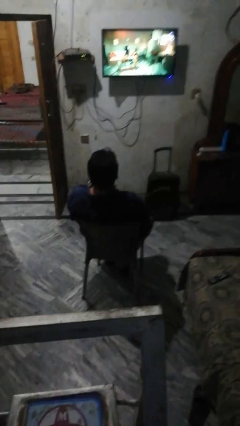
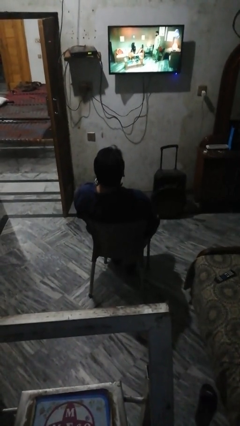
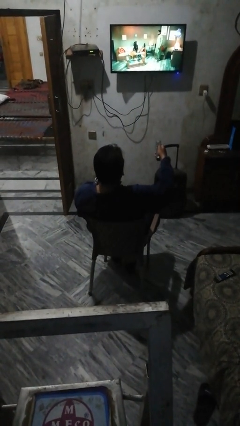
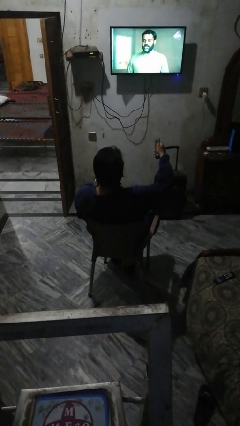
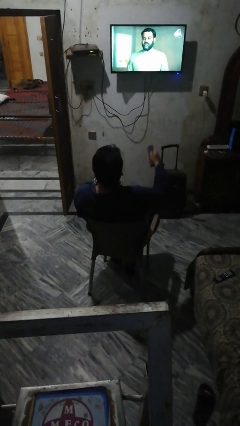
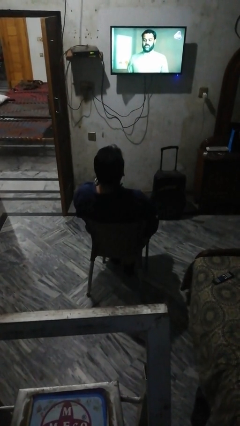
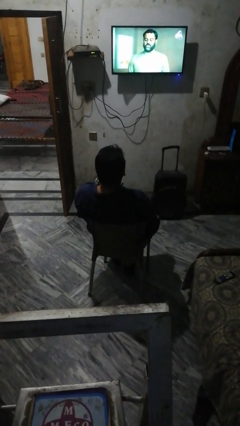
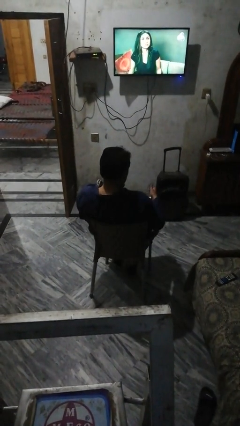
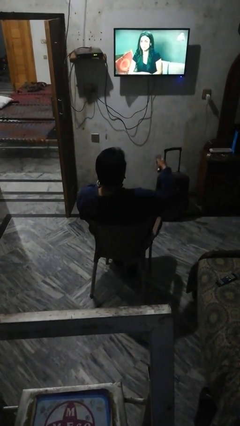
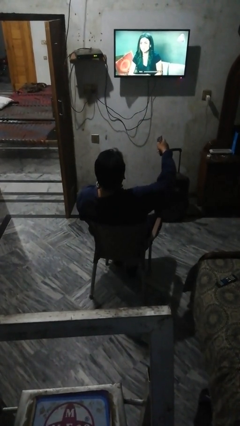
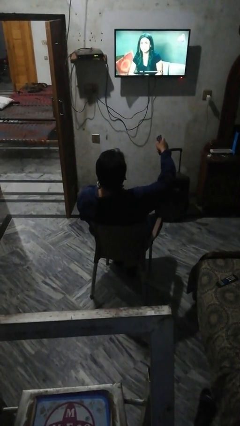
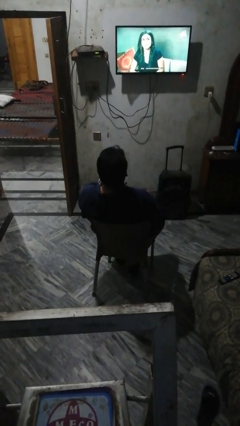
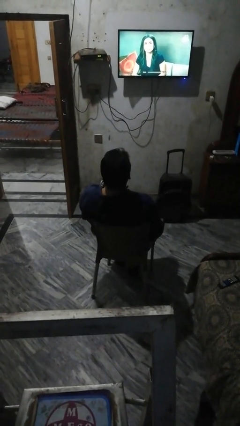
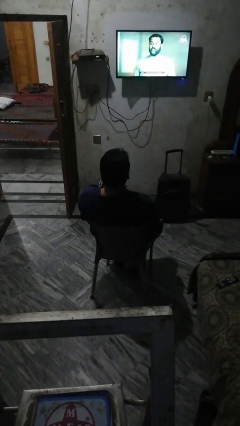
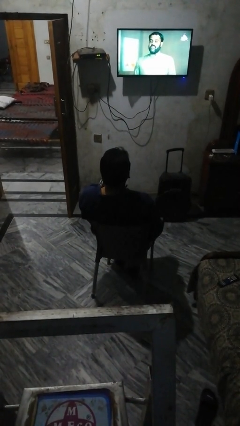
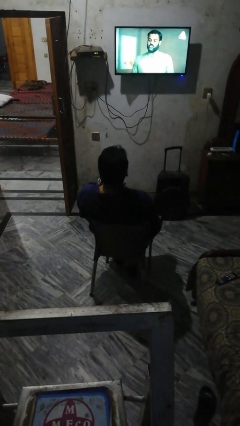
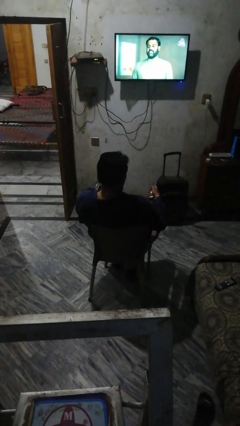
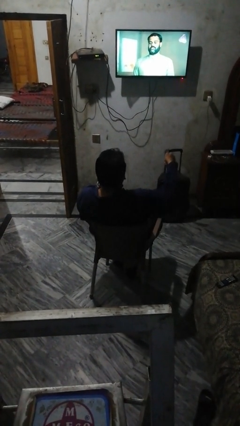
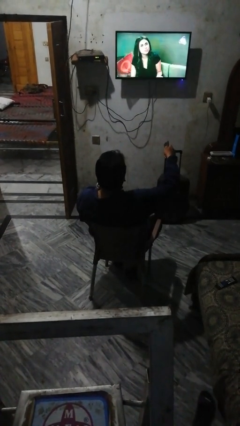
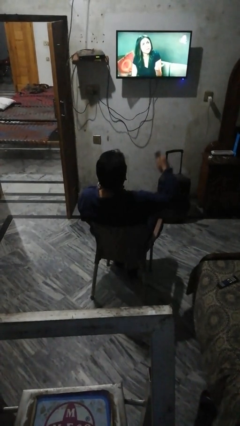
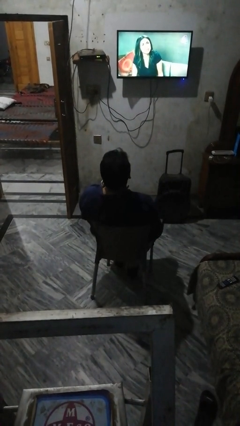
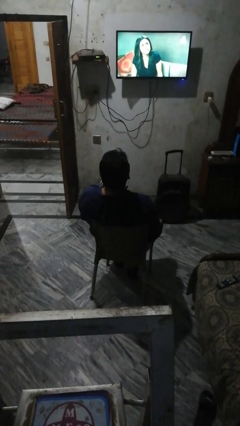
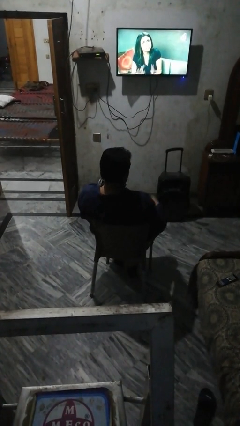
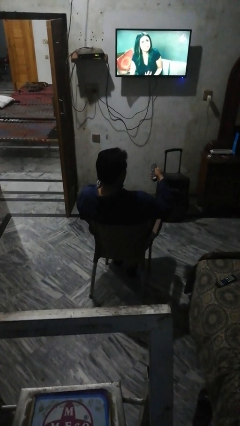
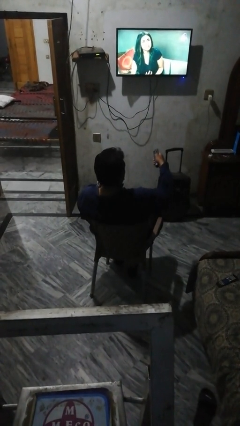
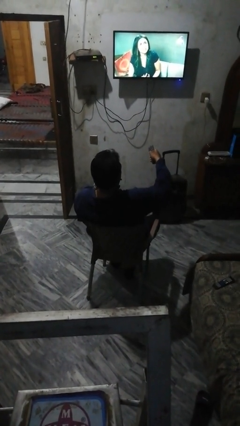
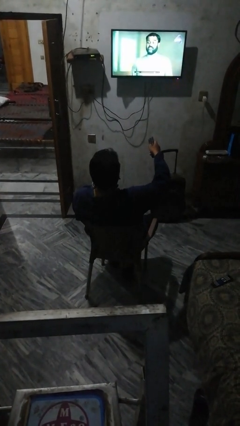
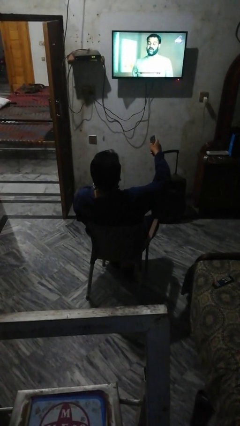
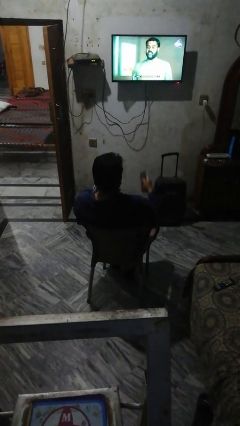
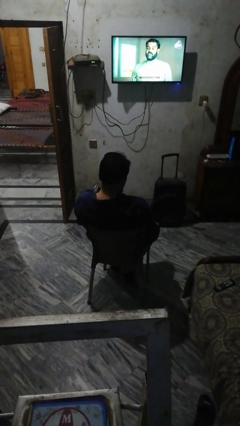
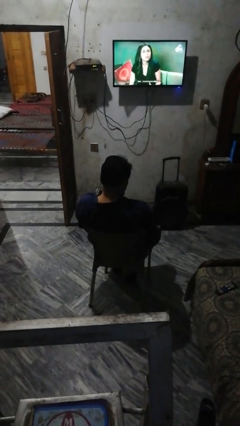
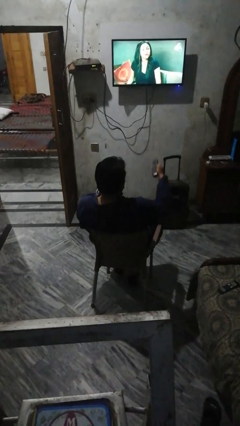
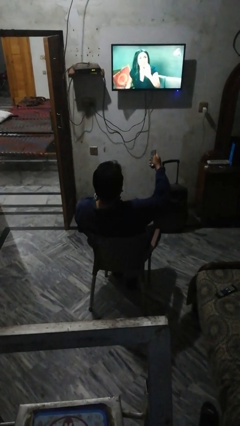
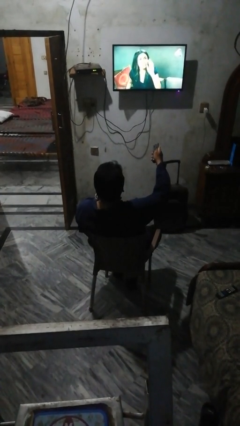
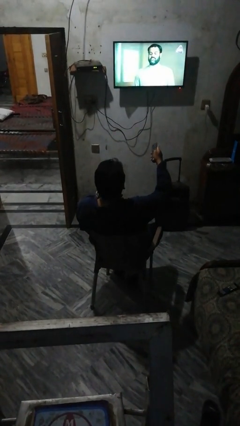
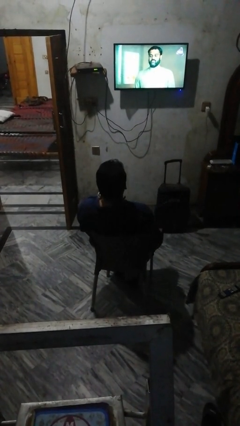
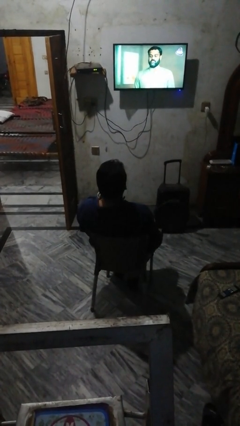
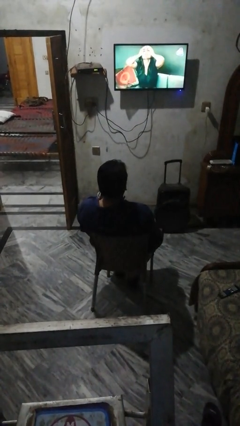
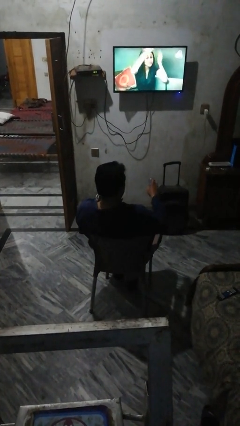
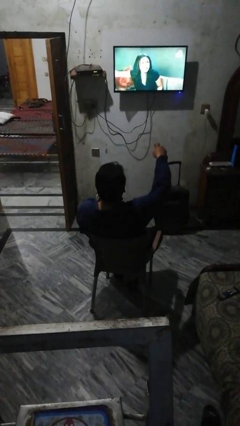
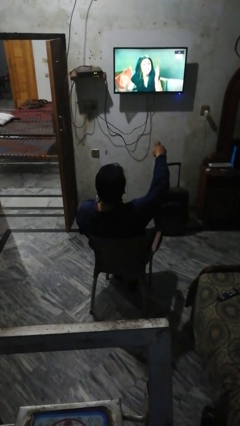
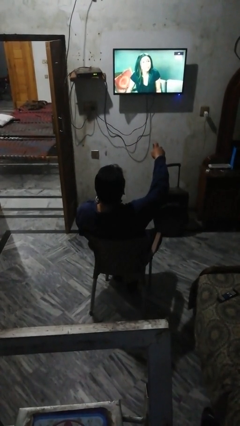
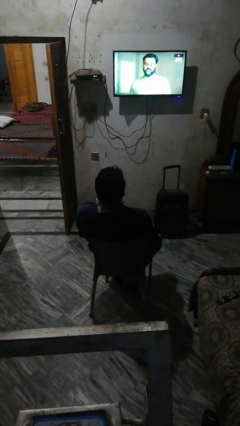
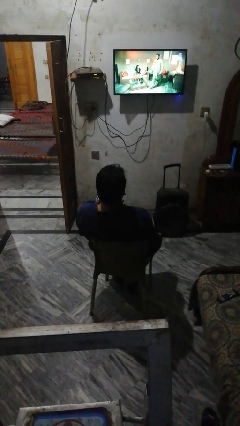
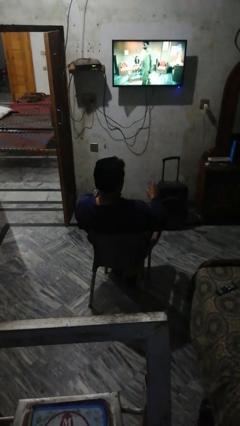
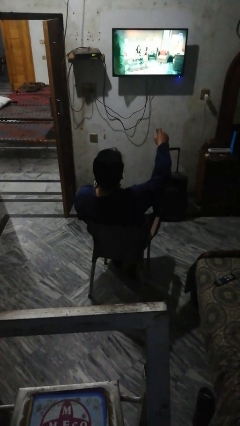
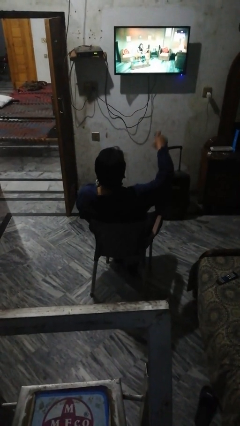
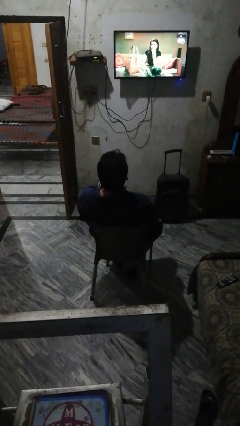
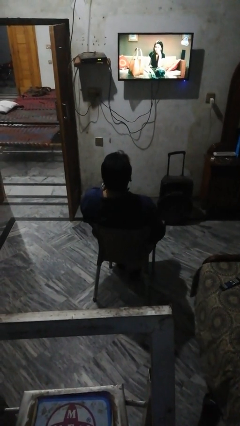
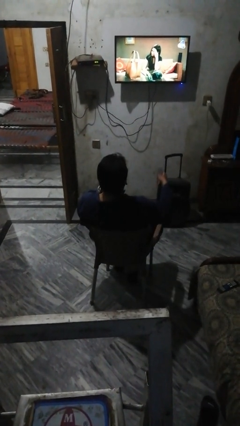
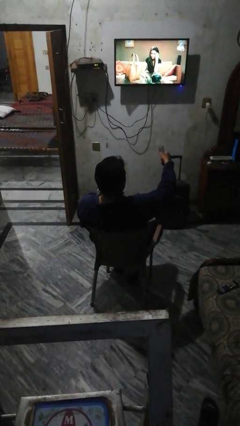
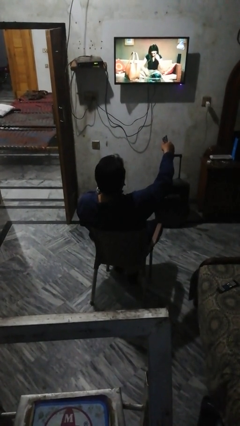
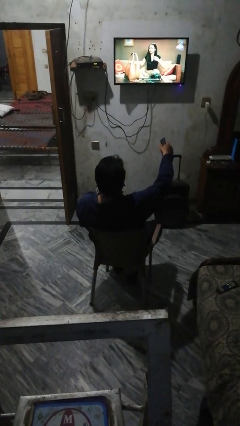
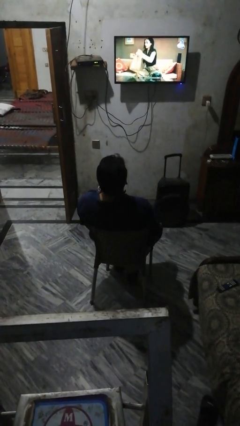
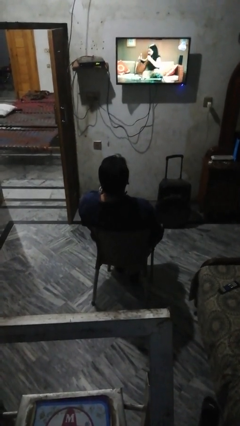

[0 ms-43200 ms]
person uses television remote

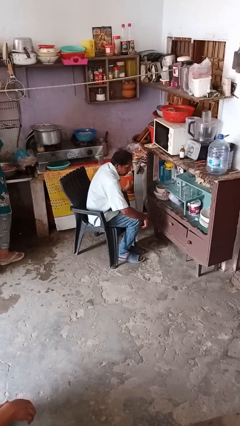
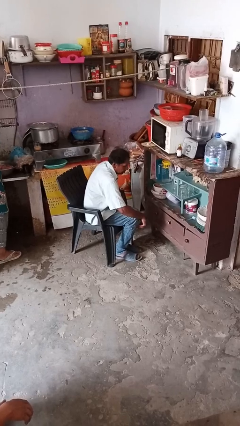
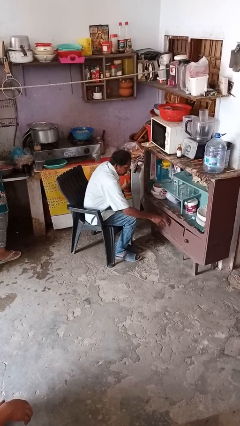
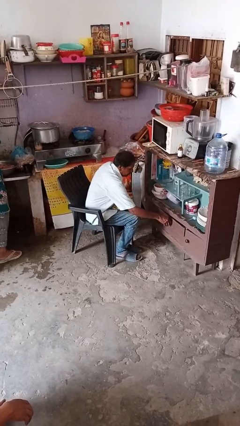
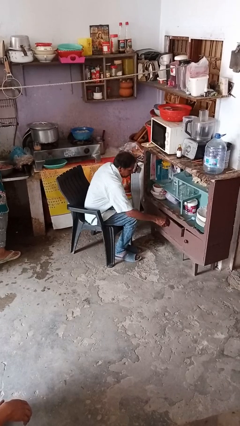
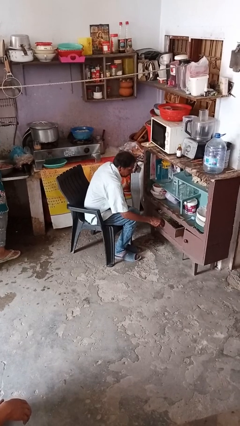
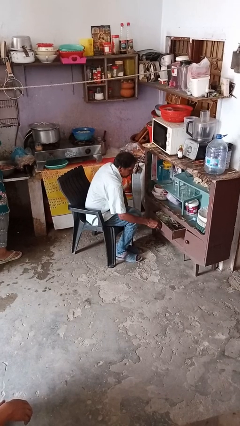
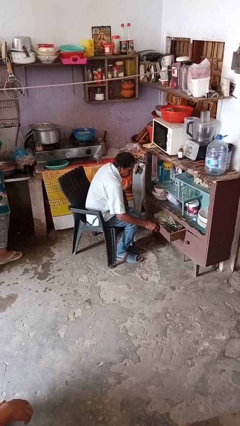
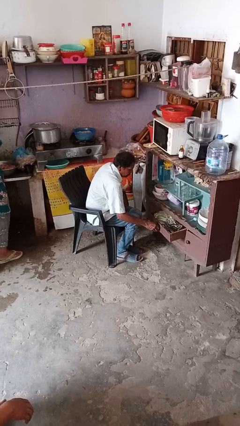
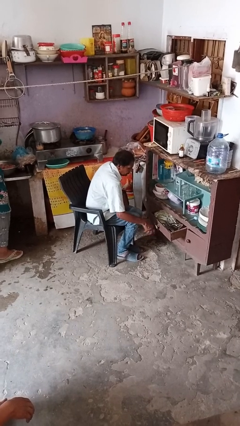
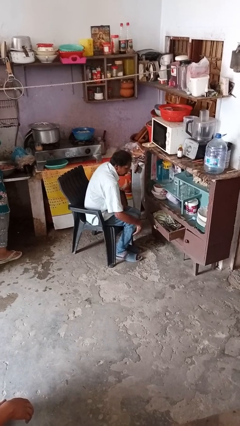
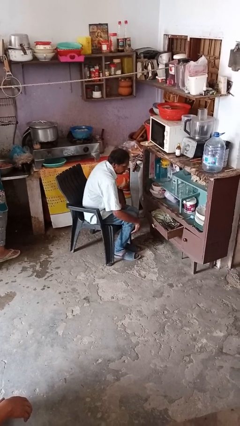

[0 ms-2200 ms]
person opens dresser drawer

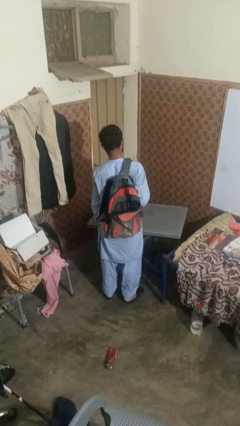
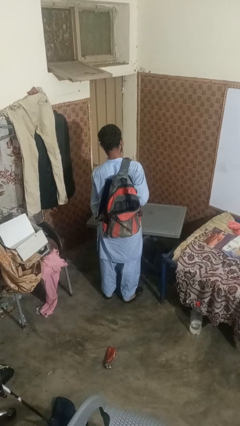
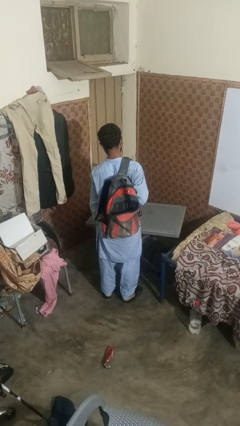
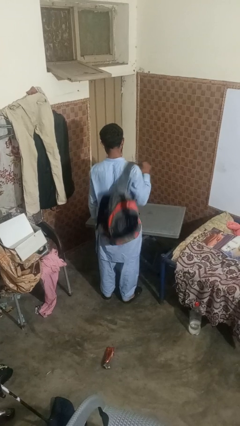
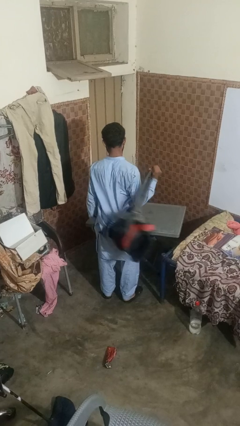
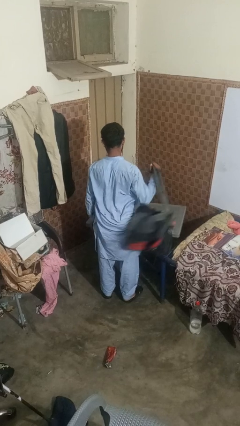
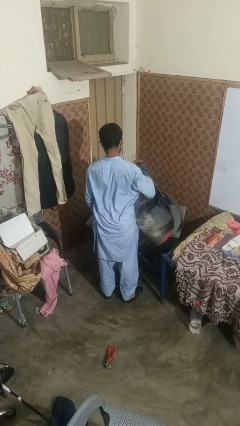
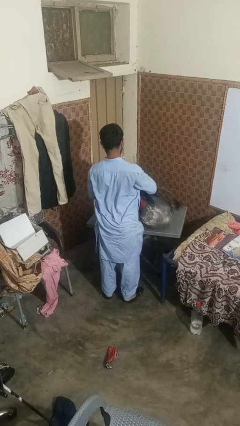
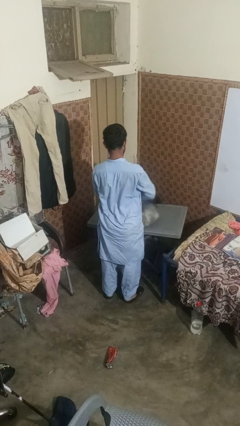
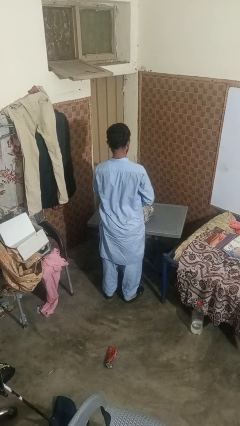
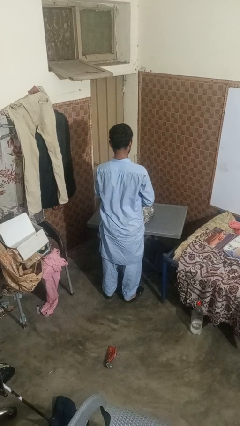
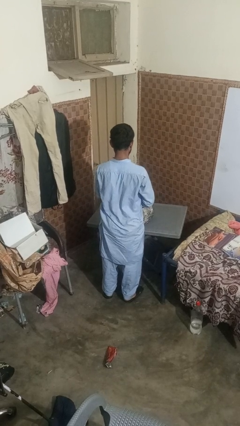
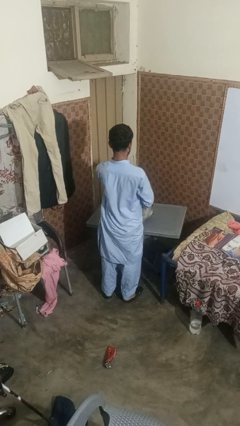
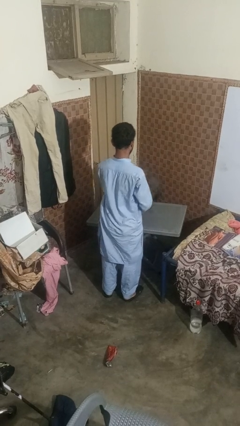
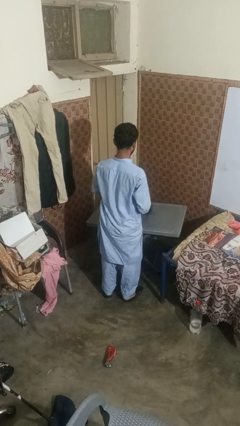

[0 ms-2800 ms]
person takes off backpack

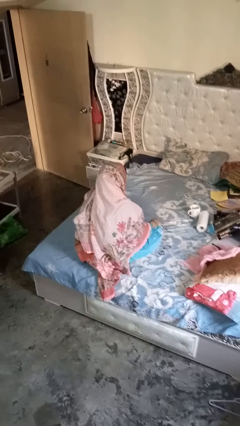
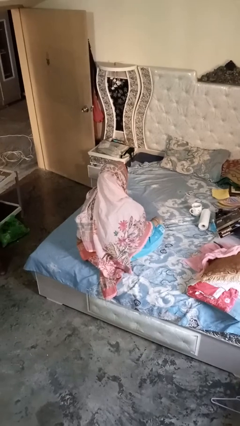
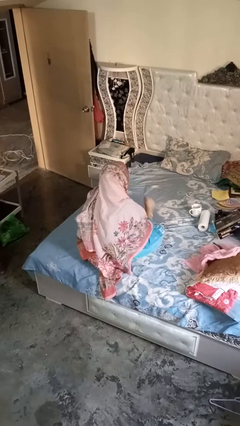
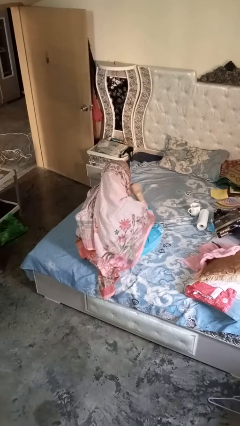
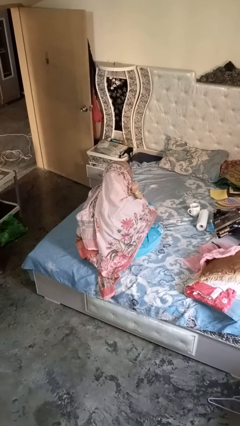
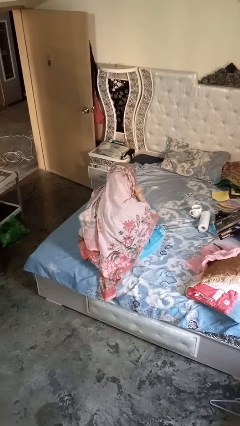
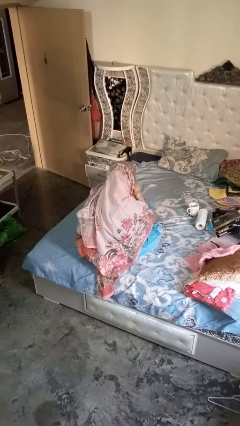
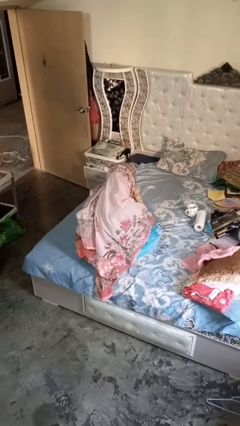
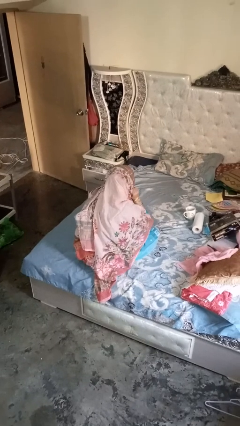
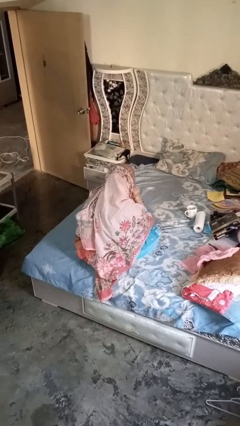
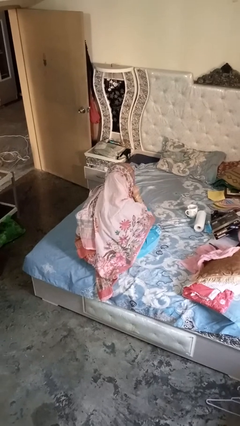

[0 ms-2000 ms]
person gestures listen closely
